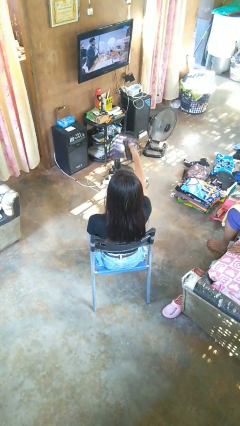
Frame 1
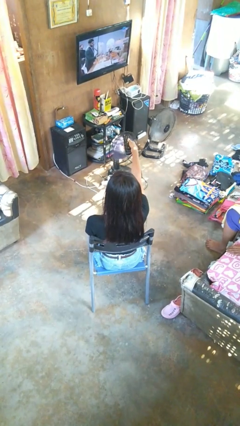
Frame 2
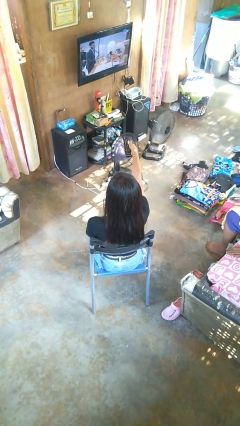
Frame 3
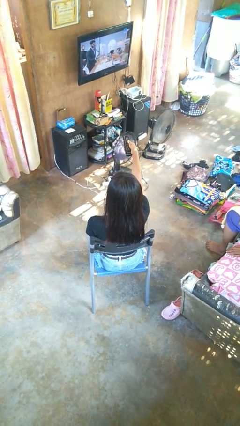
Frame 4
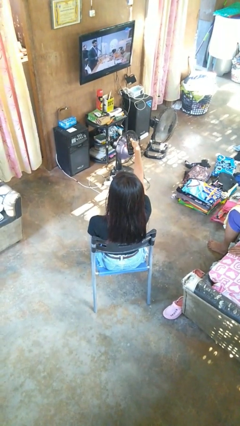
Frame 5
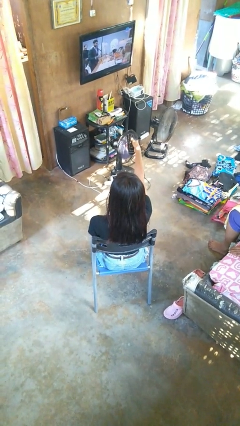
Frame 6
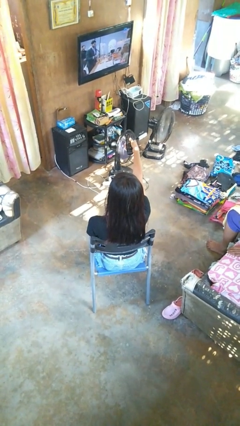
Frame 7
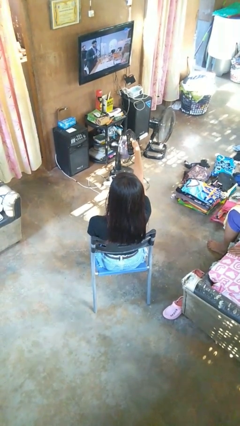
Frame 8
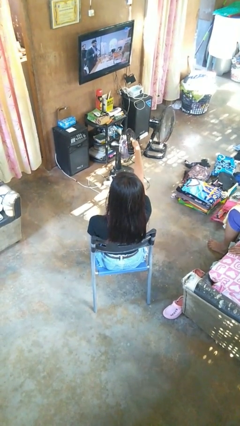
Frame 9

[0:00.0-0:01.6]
person uses television remote

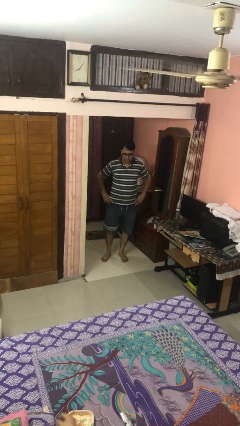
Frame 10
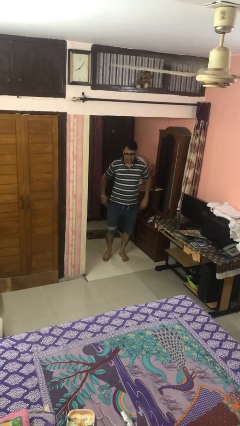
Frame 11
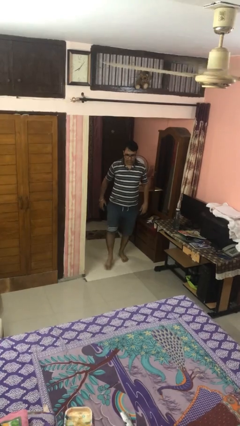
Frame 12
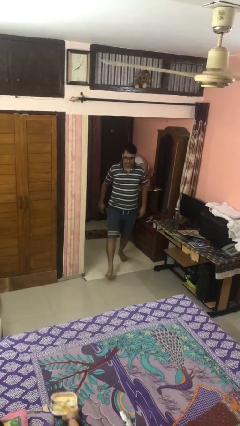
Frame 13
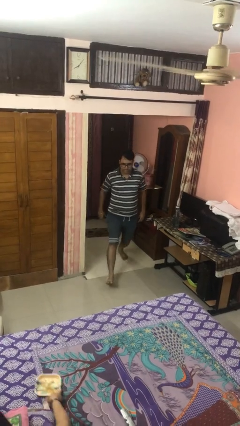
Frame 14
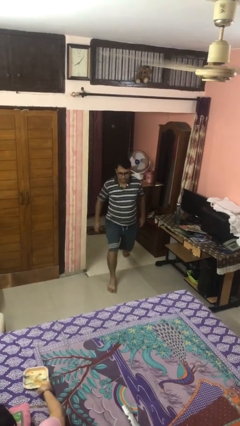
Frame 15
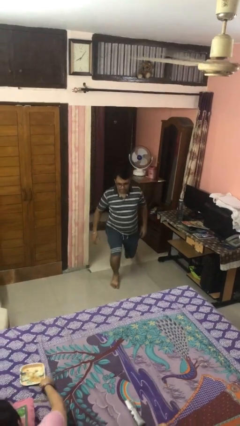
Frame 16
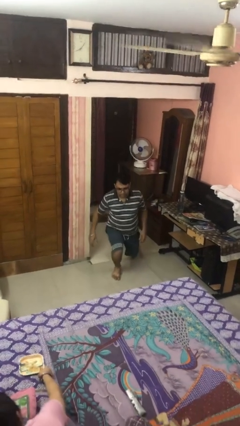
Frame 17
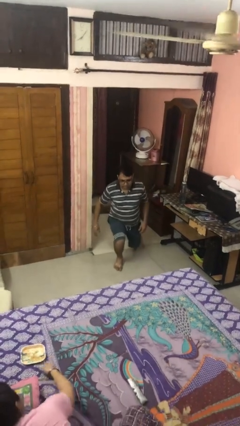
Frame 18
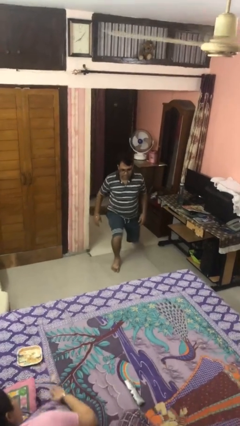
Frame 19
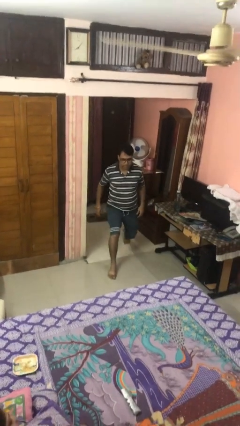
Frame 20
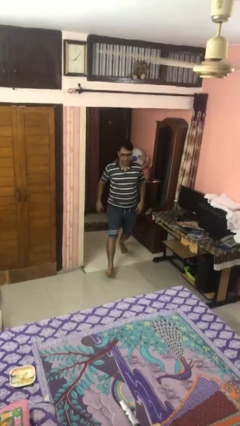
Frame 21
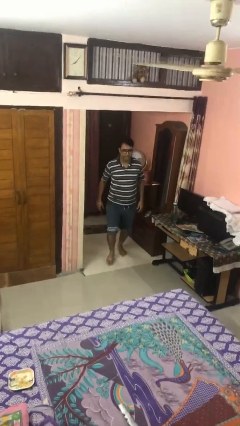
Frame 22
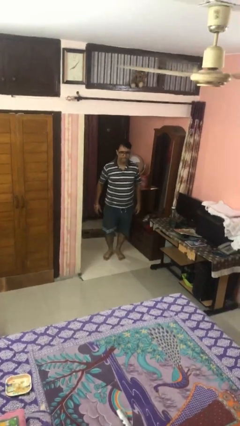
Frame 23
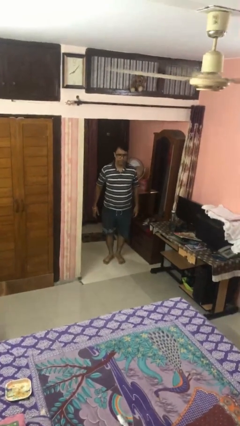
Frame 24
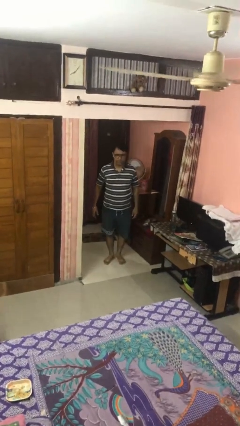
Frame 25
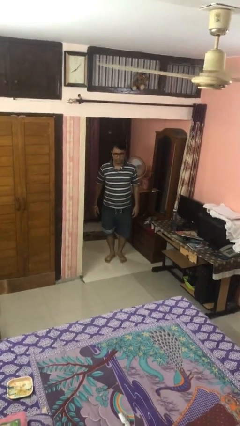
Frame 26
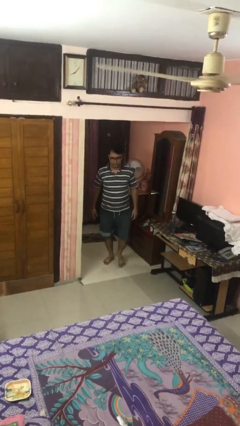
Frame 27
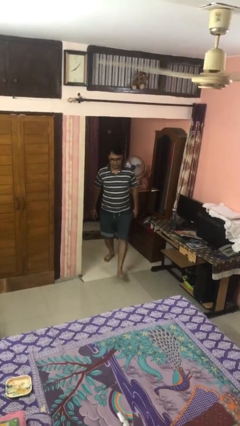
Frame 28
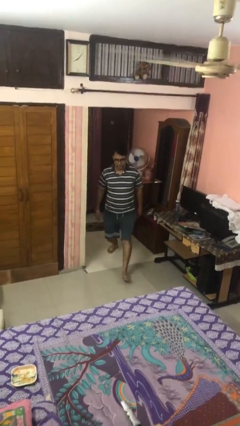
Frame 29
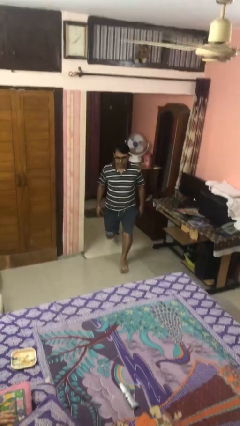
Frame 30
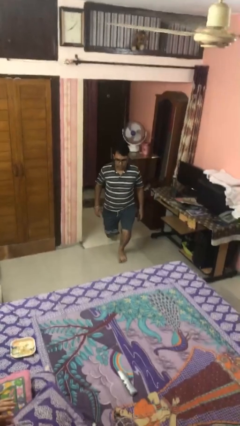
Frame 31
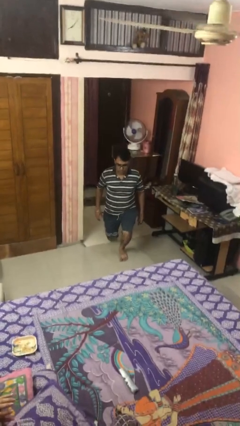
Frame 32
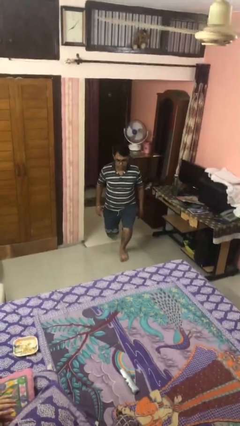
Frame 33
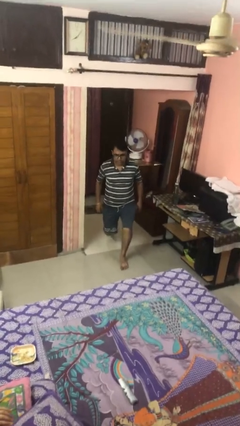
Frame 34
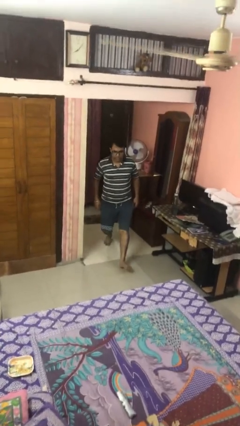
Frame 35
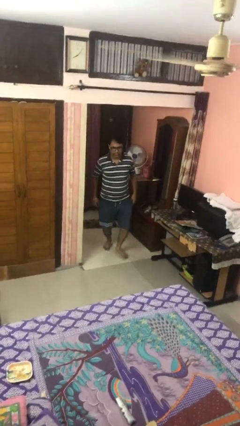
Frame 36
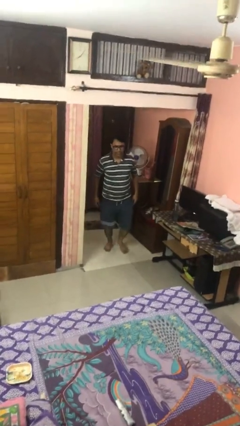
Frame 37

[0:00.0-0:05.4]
person exercises with lunges

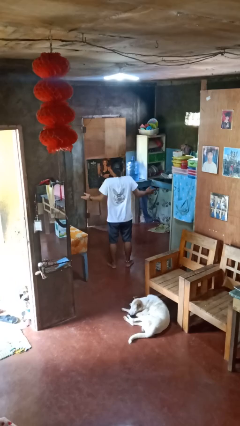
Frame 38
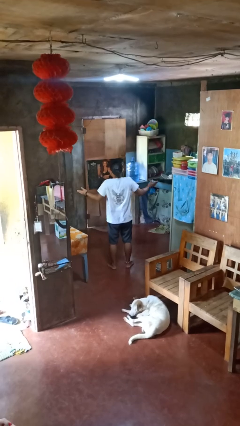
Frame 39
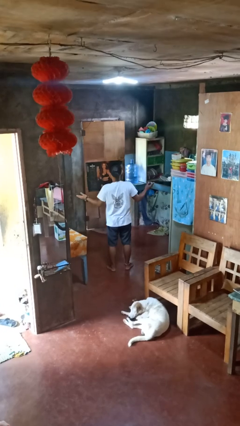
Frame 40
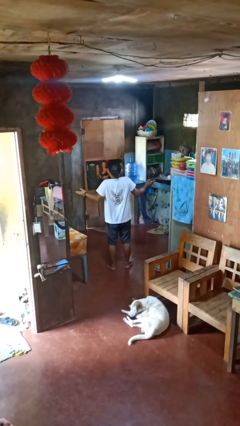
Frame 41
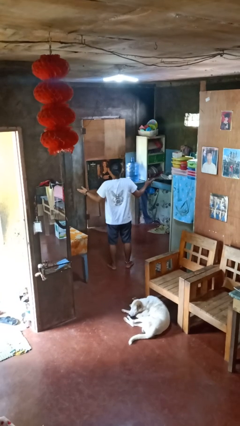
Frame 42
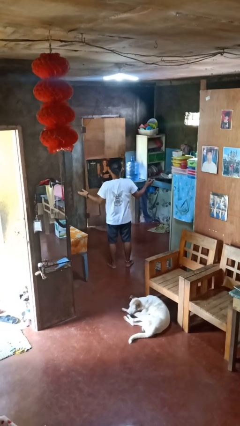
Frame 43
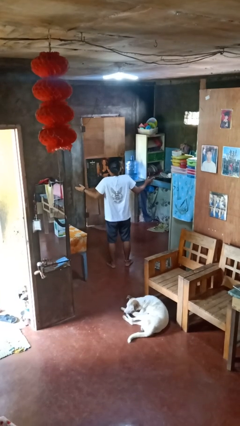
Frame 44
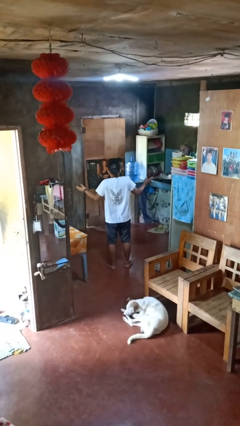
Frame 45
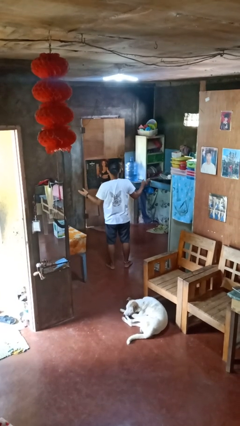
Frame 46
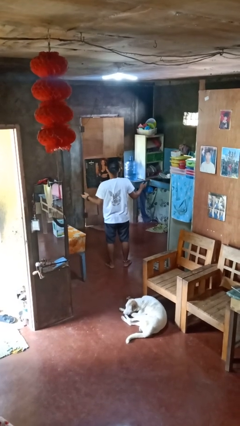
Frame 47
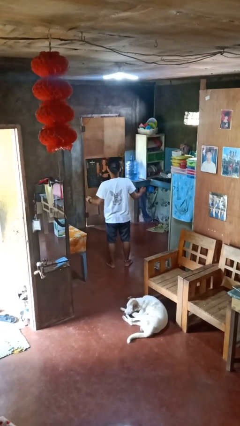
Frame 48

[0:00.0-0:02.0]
person shrugs

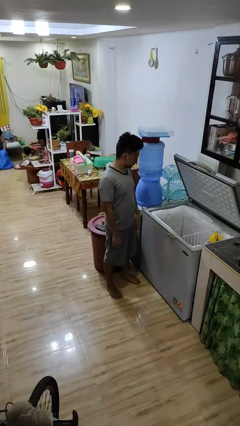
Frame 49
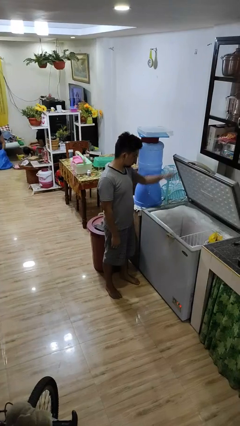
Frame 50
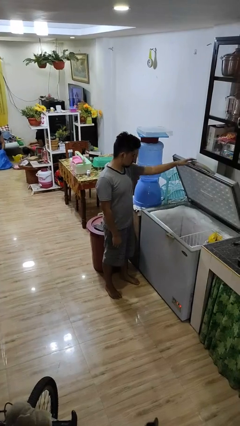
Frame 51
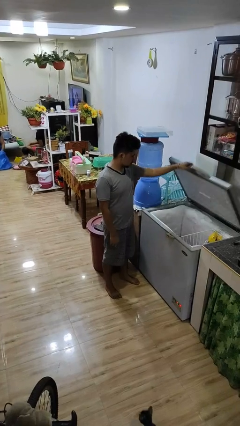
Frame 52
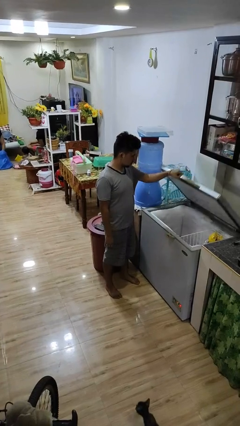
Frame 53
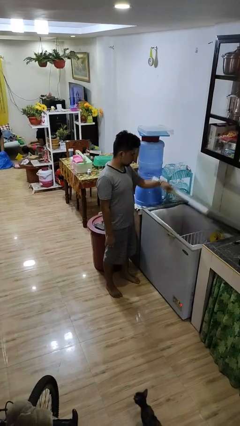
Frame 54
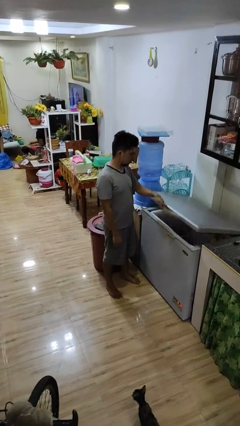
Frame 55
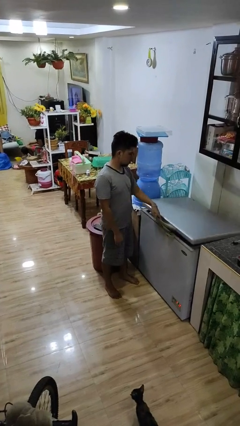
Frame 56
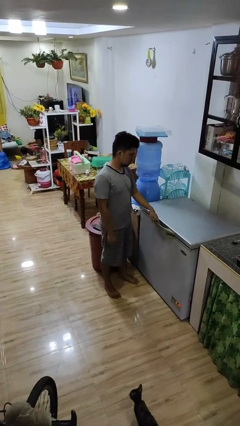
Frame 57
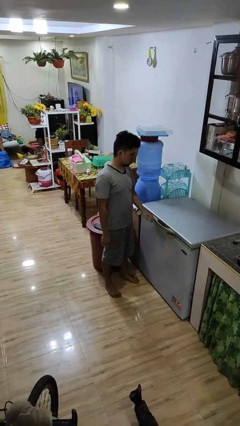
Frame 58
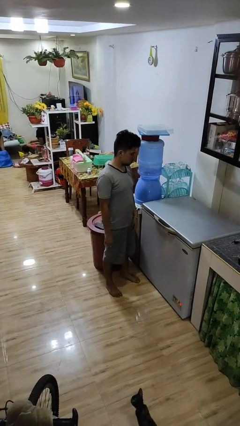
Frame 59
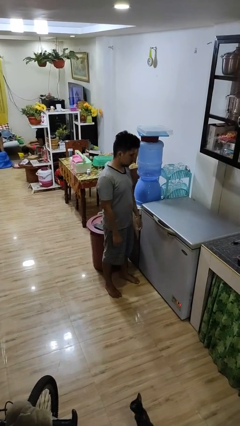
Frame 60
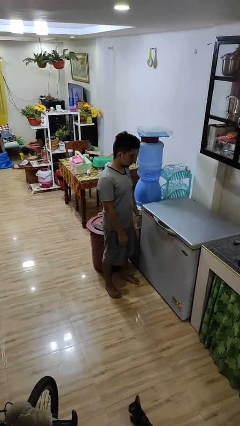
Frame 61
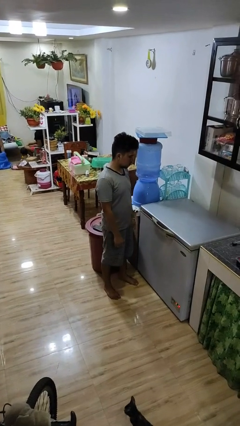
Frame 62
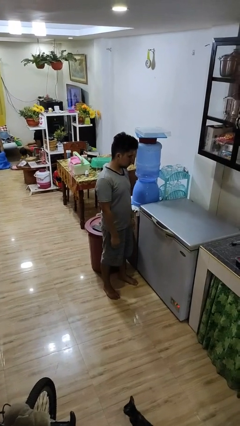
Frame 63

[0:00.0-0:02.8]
person closes refrigerator

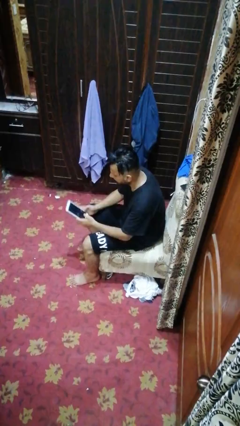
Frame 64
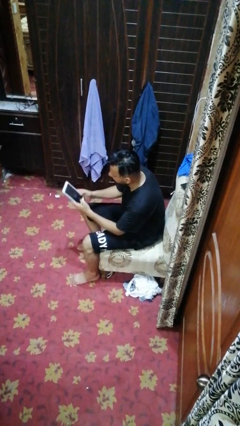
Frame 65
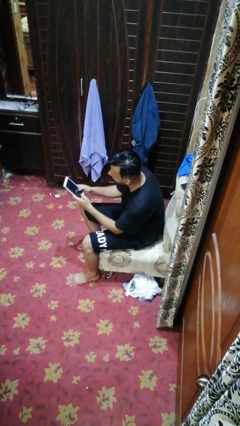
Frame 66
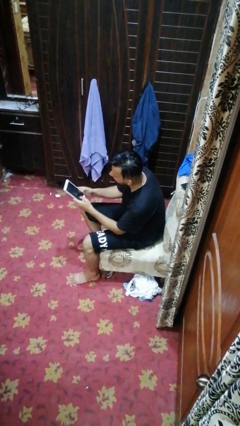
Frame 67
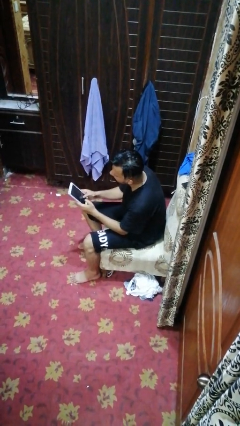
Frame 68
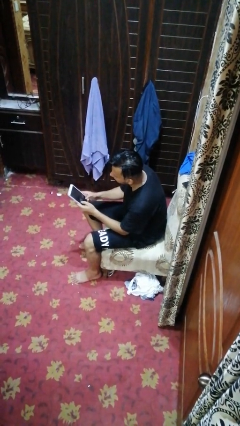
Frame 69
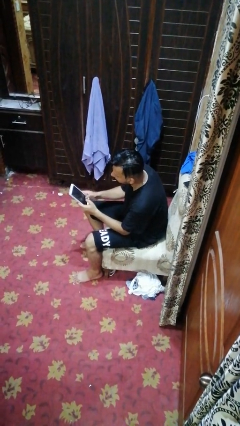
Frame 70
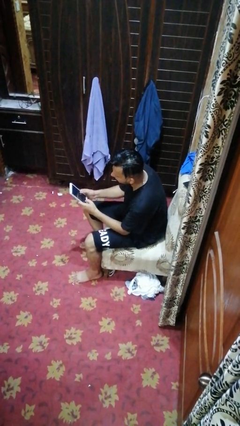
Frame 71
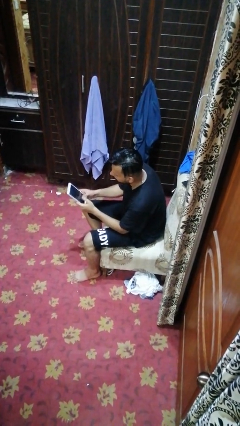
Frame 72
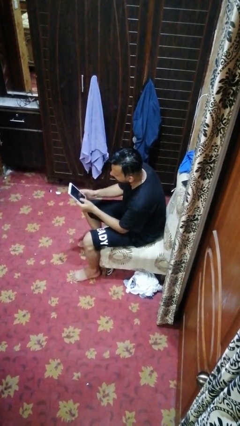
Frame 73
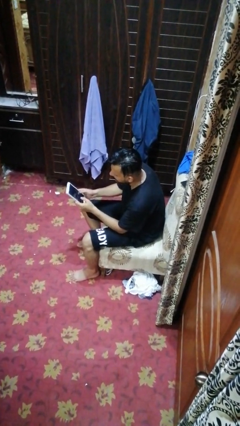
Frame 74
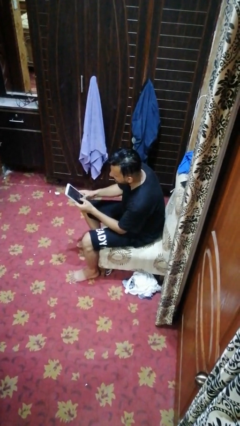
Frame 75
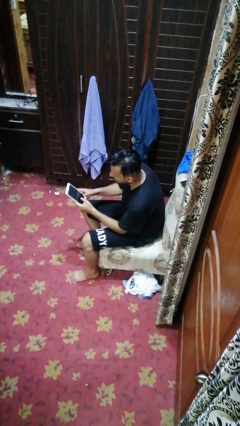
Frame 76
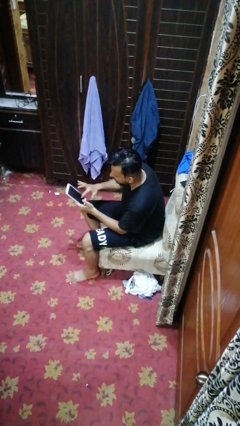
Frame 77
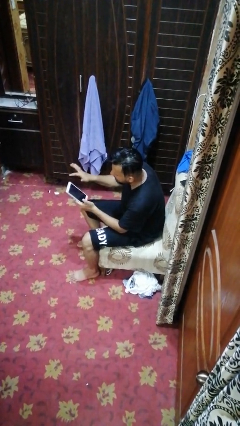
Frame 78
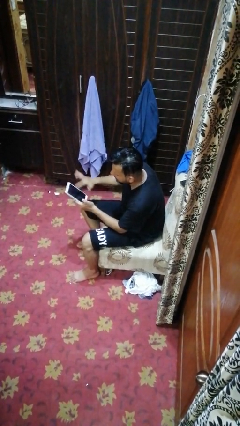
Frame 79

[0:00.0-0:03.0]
person interacts with tablet

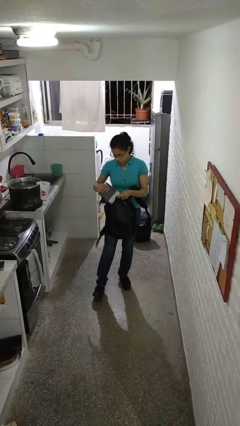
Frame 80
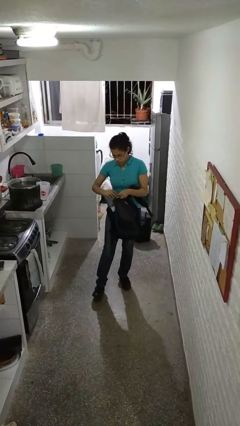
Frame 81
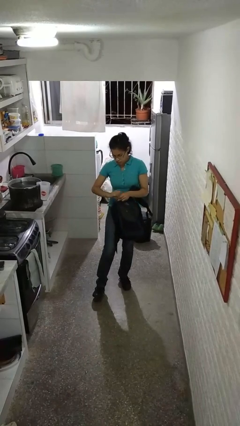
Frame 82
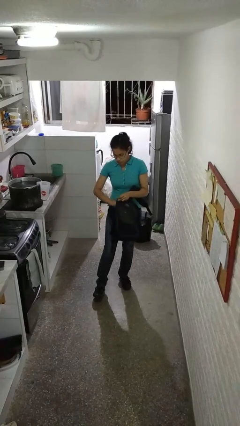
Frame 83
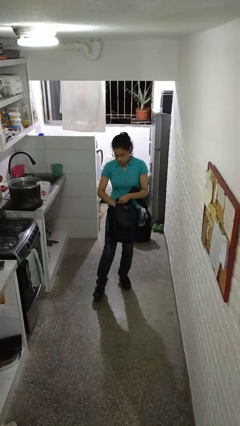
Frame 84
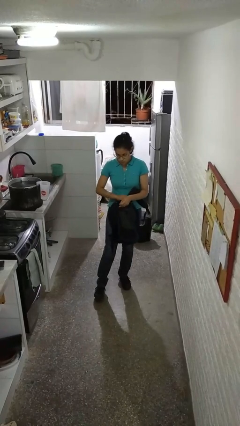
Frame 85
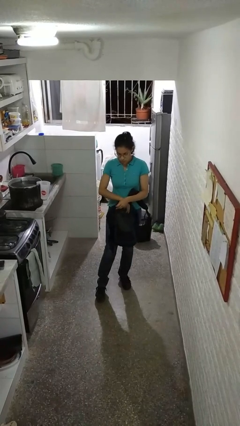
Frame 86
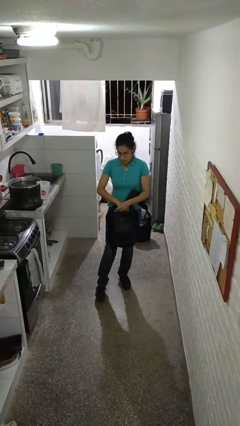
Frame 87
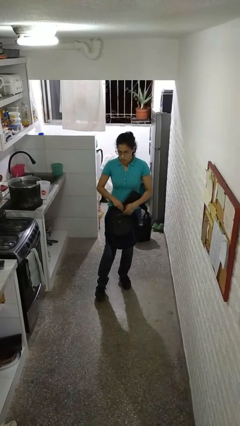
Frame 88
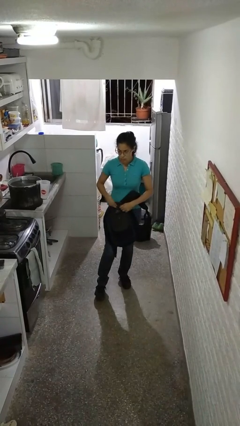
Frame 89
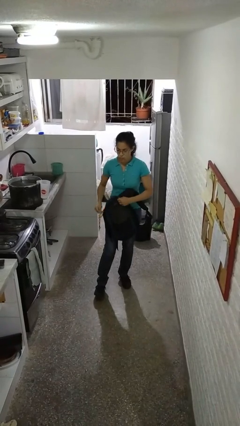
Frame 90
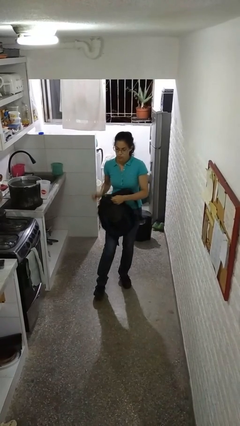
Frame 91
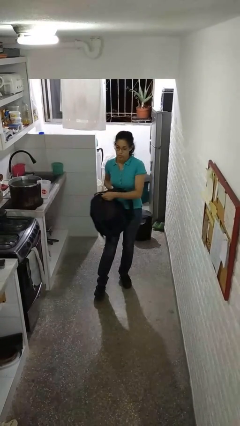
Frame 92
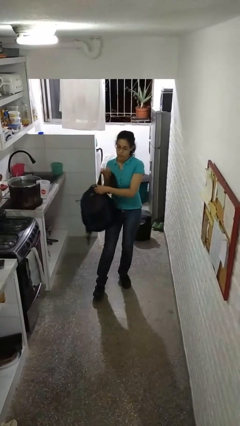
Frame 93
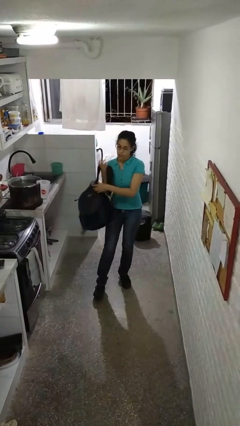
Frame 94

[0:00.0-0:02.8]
person puts object into backpack

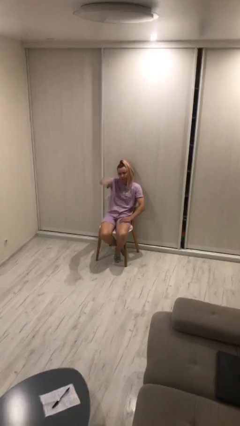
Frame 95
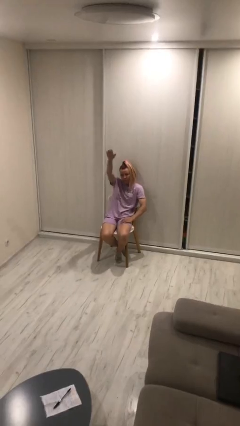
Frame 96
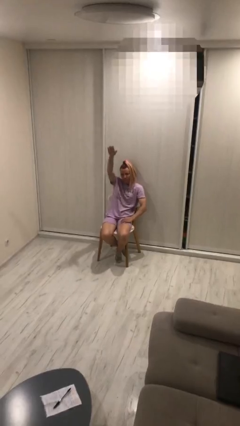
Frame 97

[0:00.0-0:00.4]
person gestures swipe up
